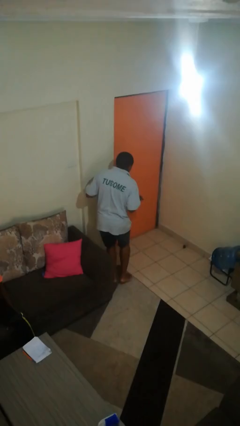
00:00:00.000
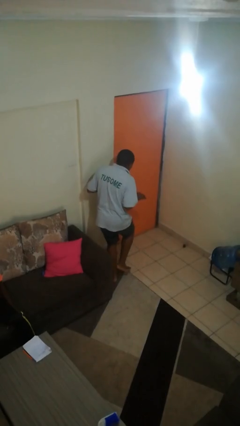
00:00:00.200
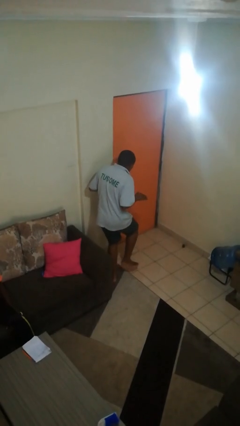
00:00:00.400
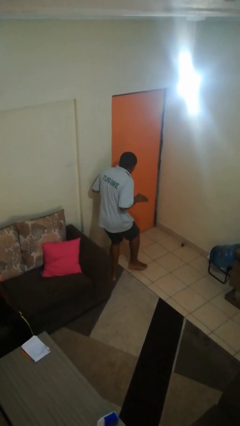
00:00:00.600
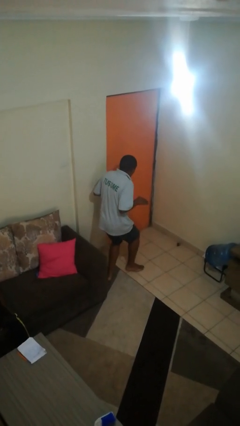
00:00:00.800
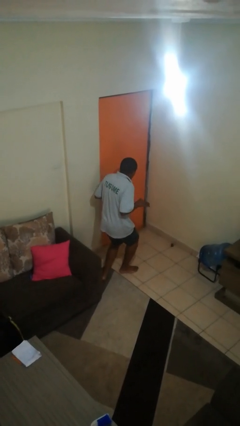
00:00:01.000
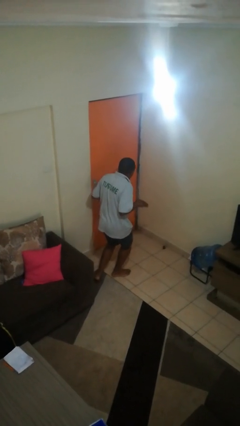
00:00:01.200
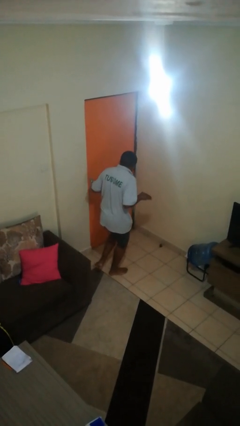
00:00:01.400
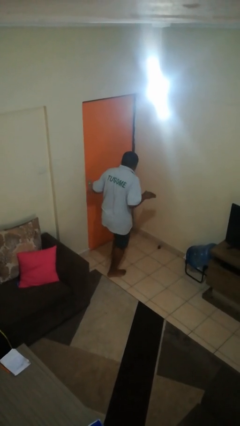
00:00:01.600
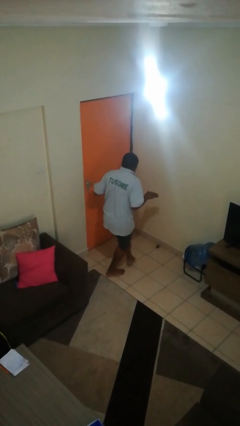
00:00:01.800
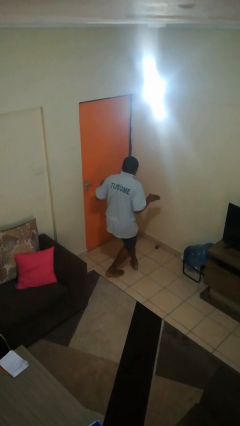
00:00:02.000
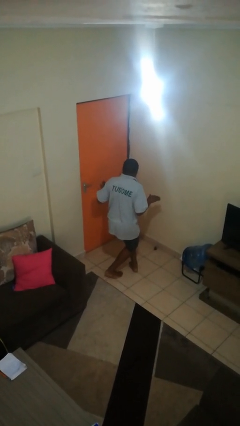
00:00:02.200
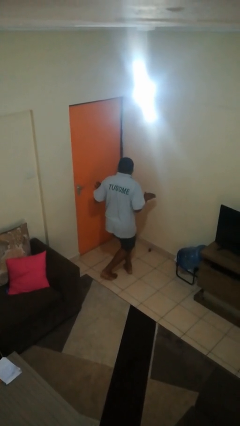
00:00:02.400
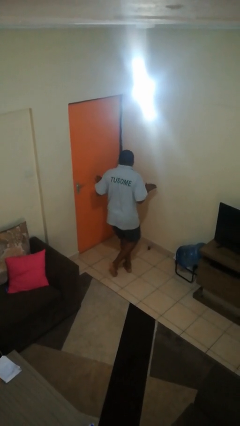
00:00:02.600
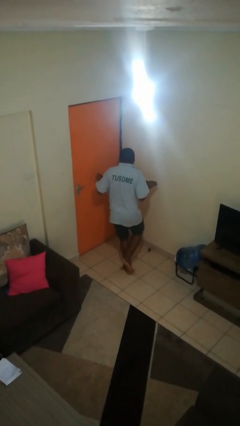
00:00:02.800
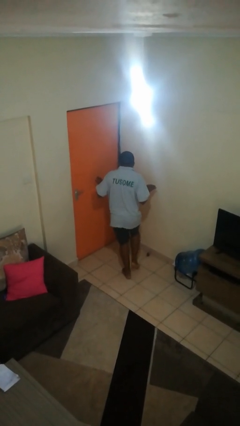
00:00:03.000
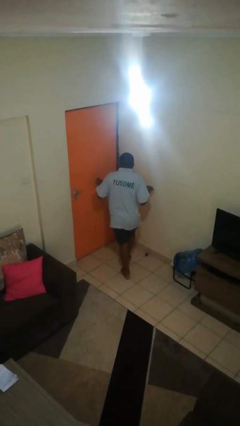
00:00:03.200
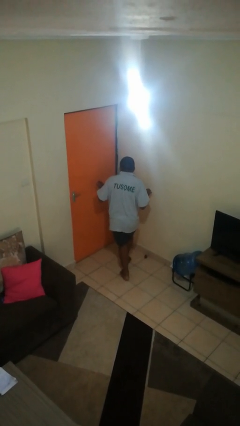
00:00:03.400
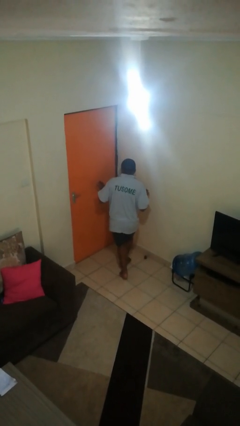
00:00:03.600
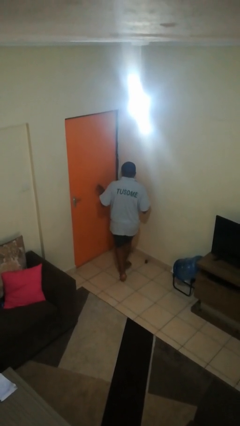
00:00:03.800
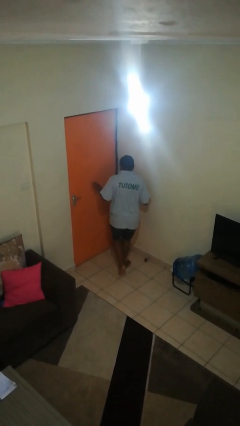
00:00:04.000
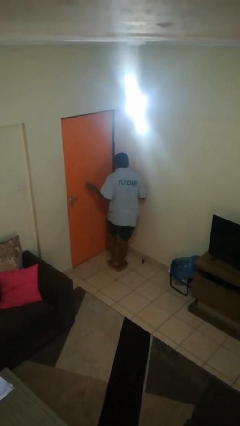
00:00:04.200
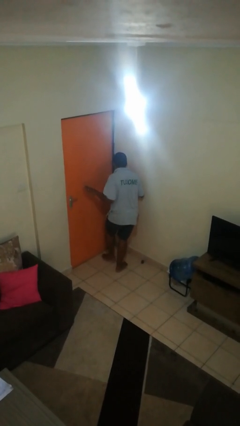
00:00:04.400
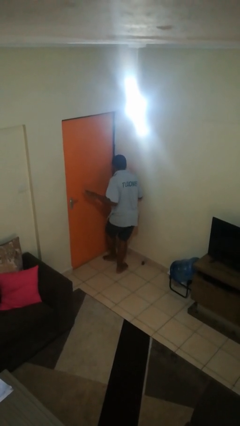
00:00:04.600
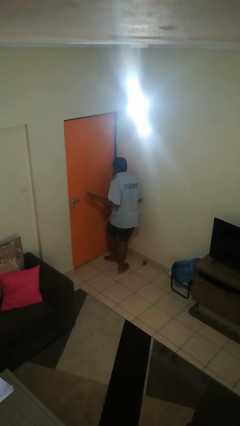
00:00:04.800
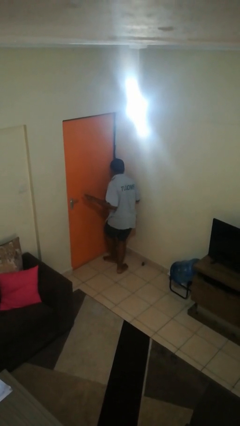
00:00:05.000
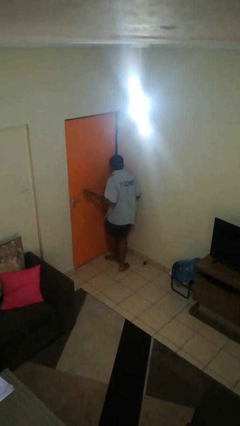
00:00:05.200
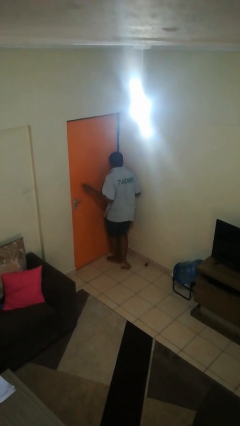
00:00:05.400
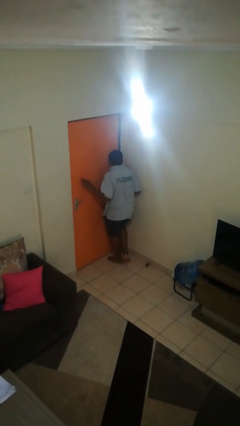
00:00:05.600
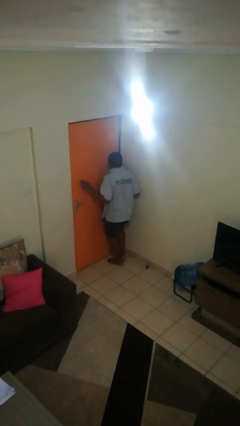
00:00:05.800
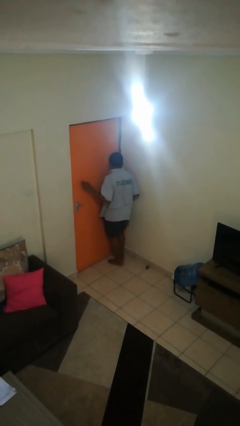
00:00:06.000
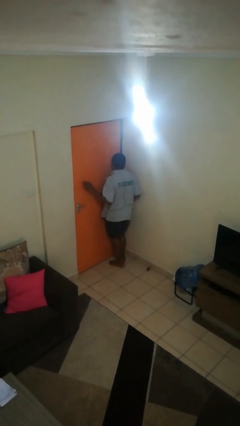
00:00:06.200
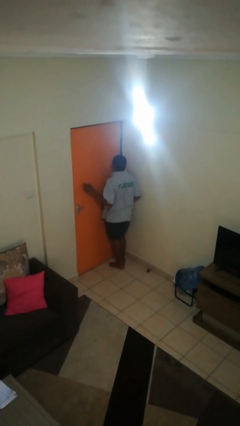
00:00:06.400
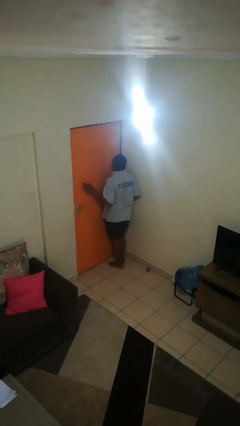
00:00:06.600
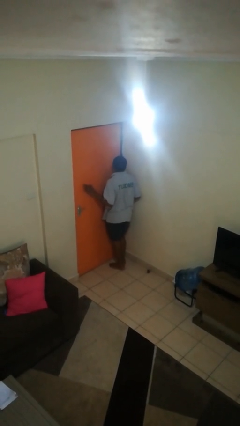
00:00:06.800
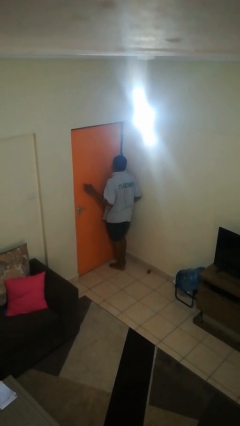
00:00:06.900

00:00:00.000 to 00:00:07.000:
person walks tiptoe

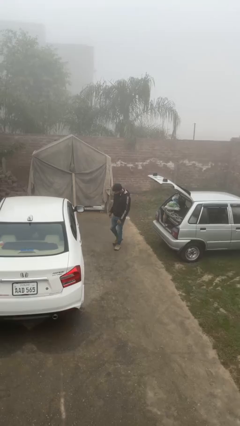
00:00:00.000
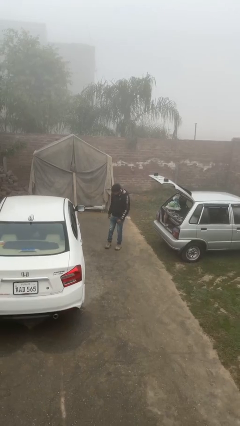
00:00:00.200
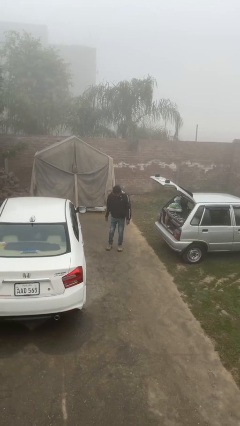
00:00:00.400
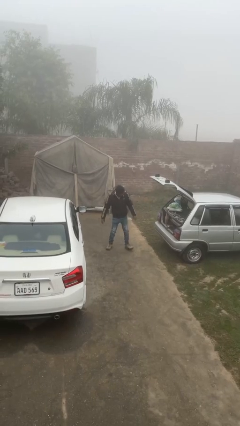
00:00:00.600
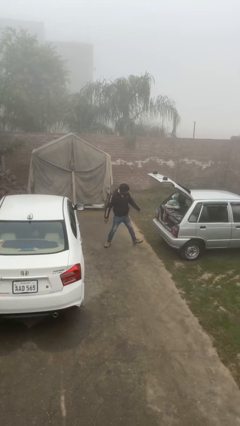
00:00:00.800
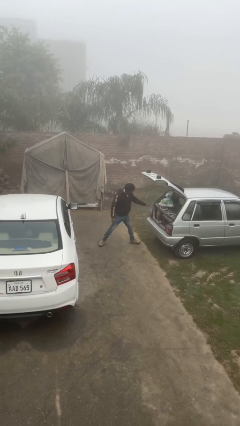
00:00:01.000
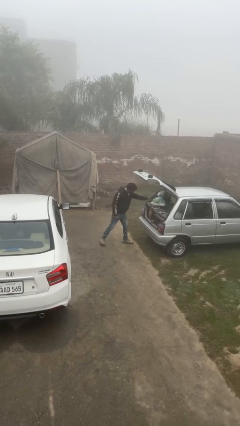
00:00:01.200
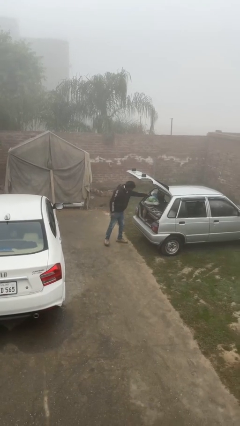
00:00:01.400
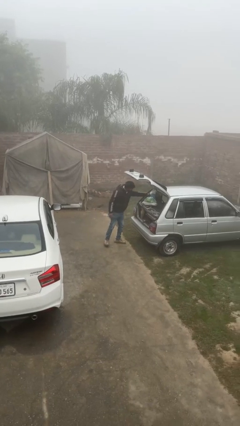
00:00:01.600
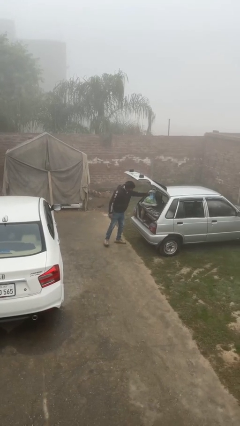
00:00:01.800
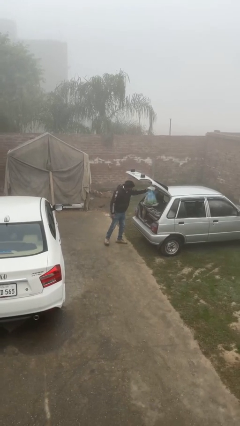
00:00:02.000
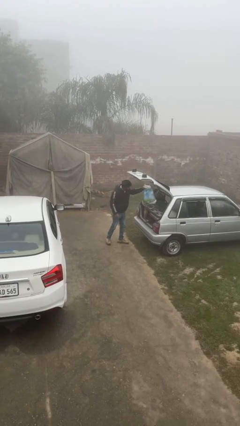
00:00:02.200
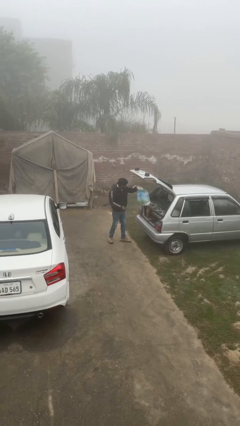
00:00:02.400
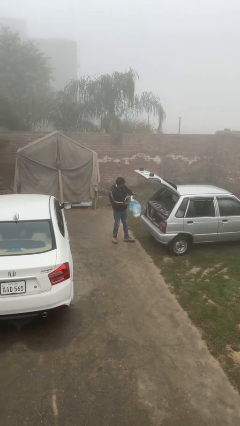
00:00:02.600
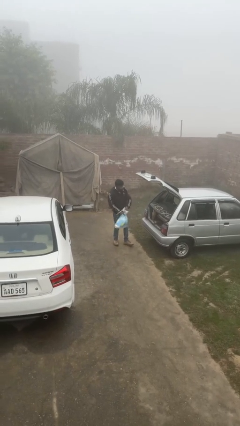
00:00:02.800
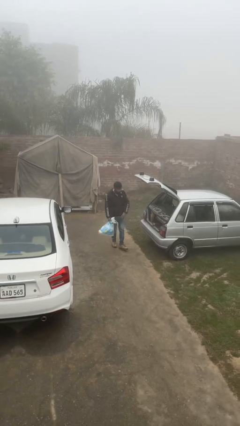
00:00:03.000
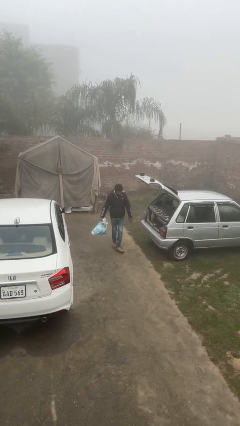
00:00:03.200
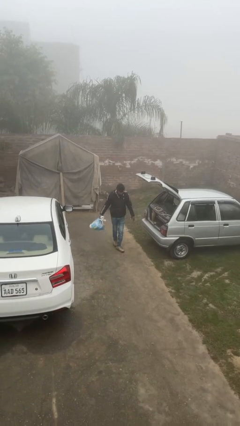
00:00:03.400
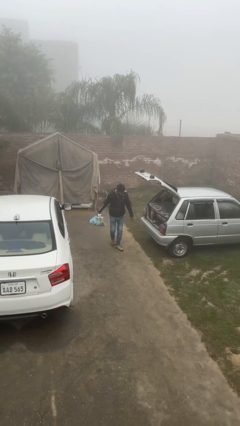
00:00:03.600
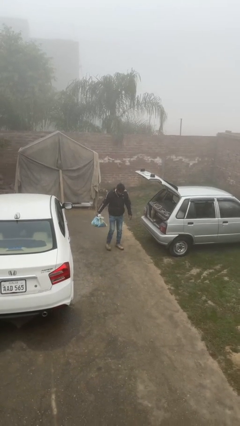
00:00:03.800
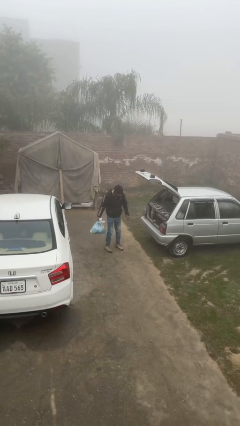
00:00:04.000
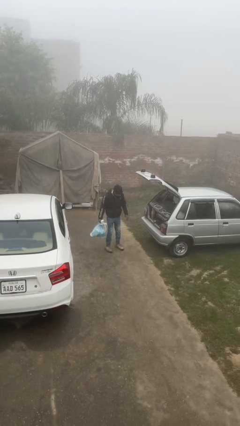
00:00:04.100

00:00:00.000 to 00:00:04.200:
person unloads car

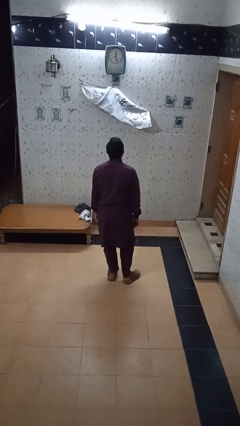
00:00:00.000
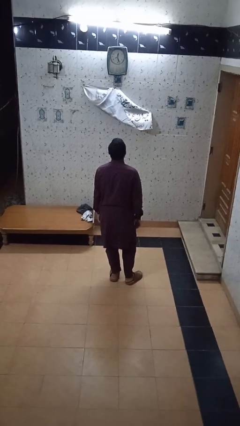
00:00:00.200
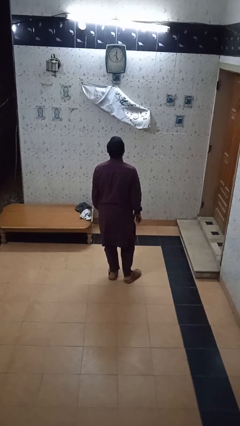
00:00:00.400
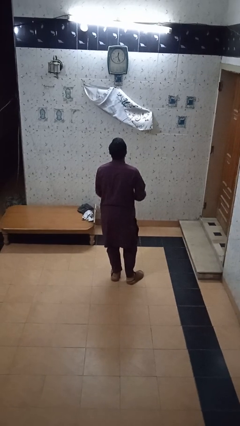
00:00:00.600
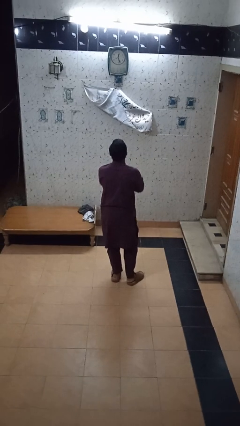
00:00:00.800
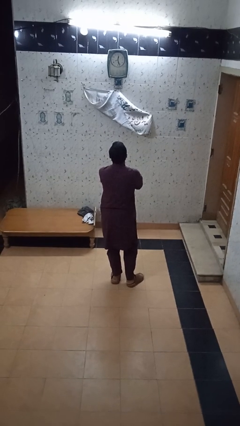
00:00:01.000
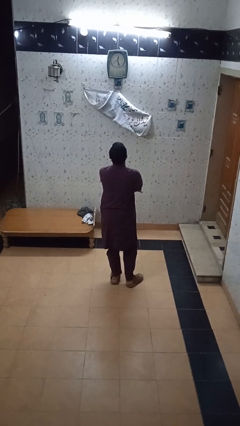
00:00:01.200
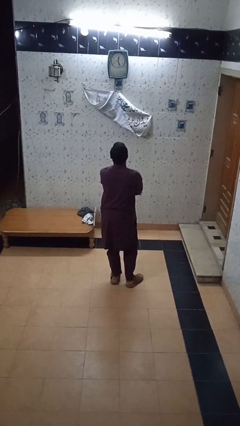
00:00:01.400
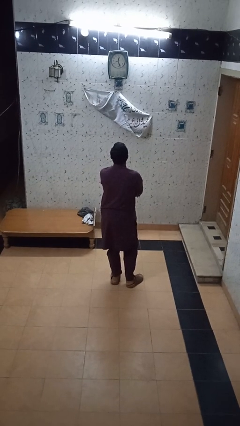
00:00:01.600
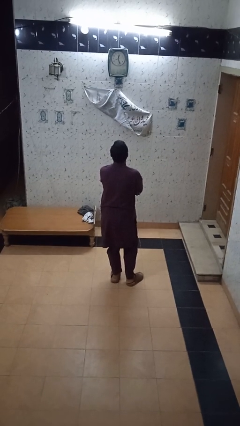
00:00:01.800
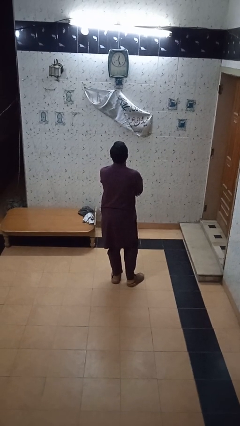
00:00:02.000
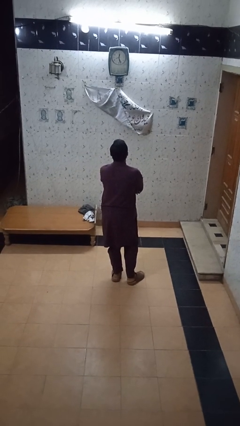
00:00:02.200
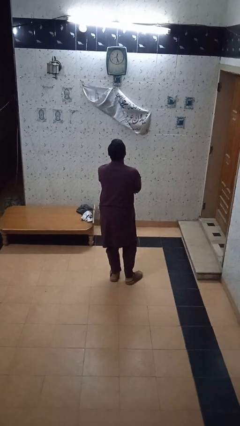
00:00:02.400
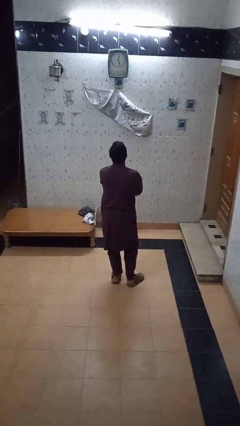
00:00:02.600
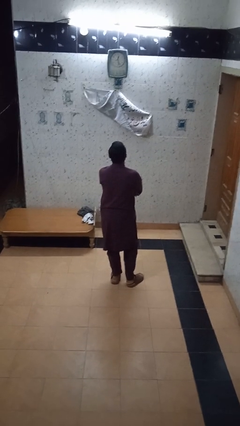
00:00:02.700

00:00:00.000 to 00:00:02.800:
person crosses arms

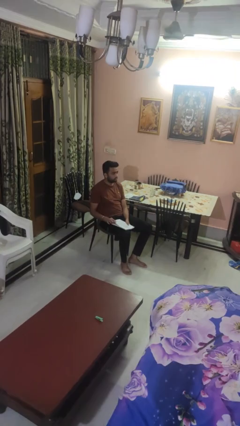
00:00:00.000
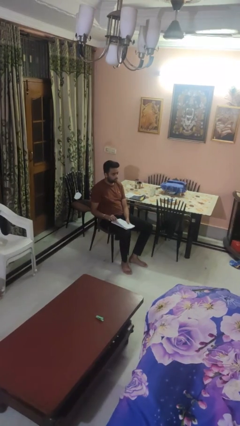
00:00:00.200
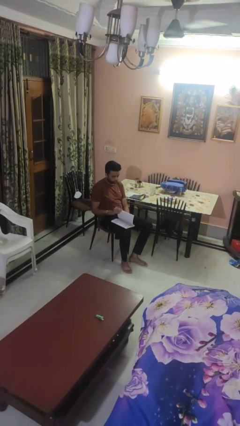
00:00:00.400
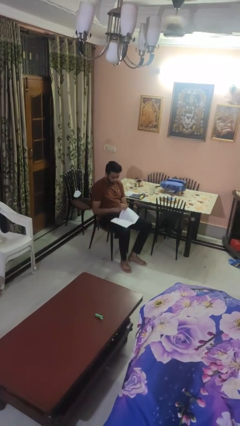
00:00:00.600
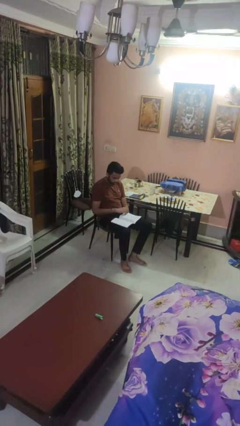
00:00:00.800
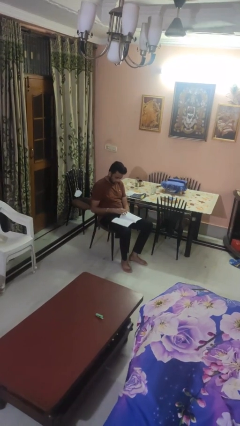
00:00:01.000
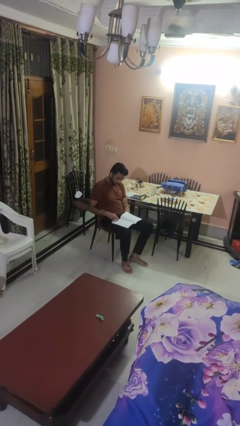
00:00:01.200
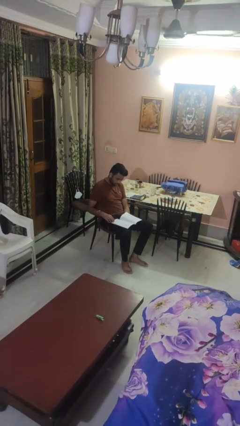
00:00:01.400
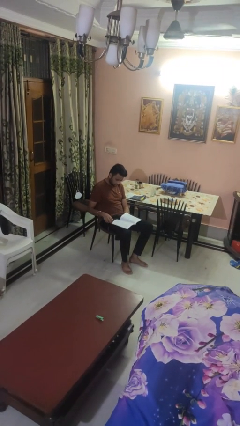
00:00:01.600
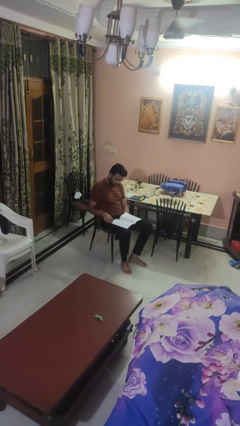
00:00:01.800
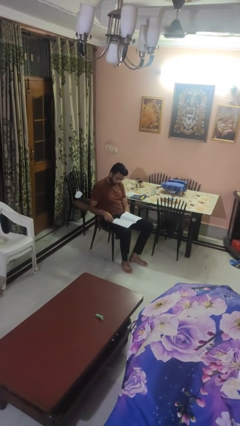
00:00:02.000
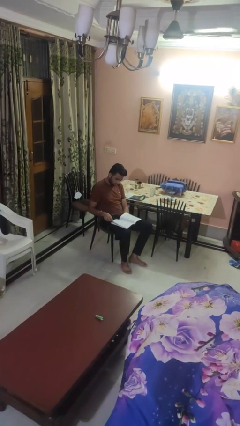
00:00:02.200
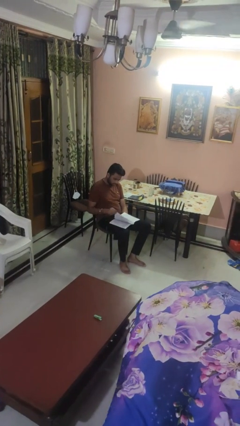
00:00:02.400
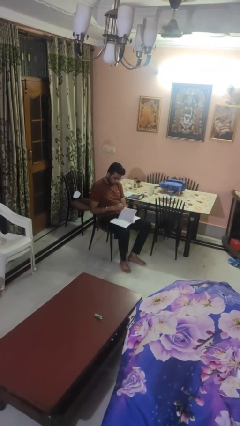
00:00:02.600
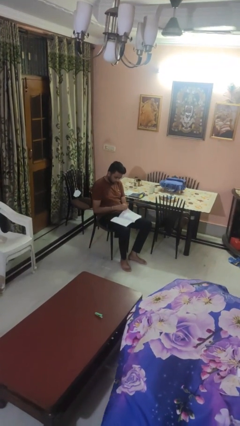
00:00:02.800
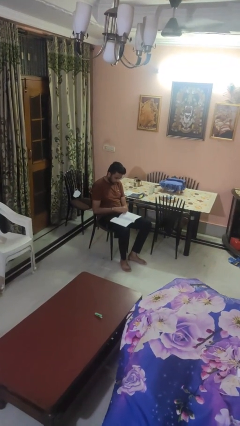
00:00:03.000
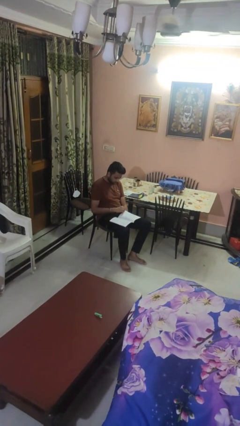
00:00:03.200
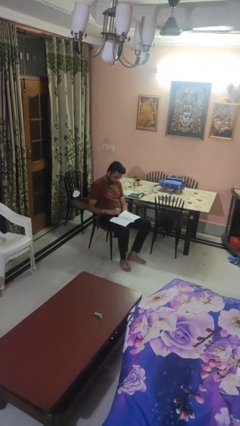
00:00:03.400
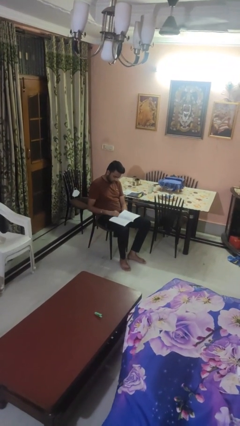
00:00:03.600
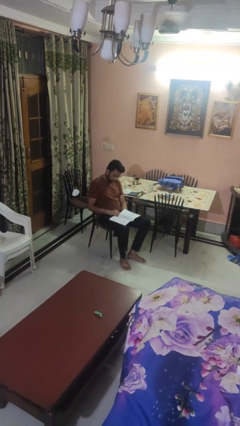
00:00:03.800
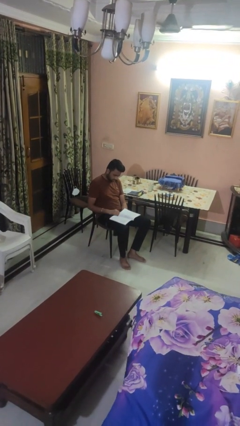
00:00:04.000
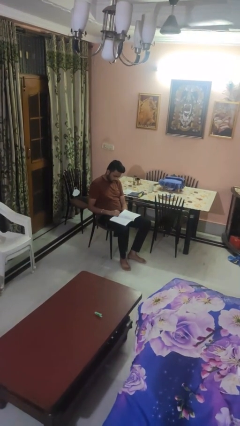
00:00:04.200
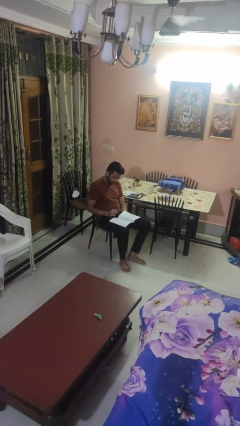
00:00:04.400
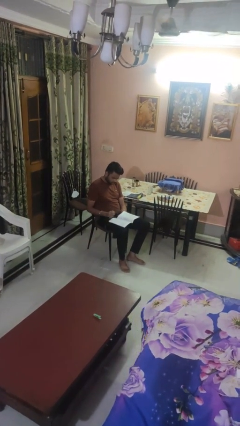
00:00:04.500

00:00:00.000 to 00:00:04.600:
person reads magazine
